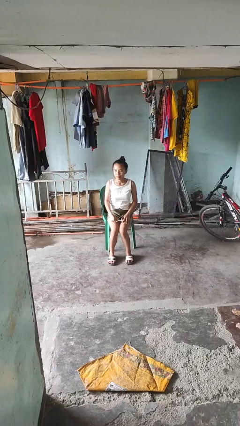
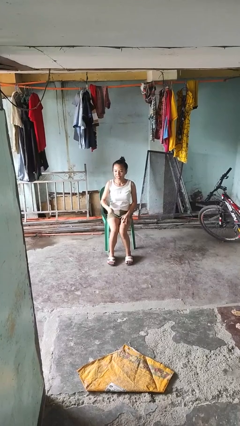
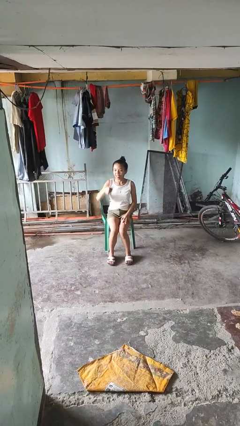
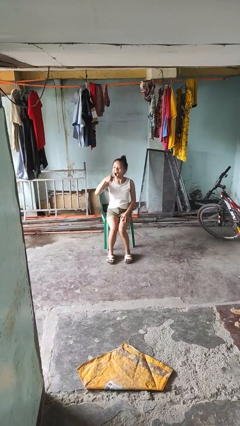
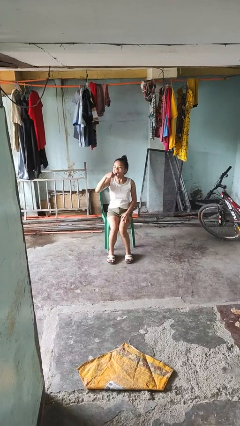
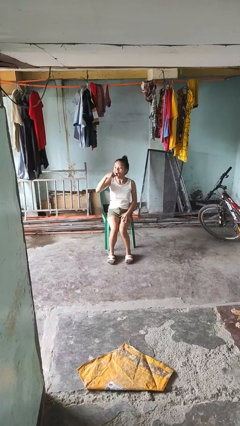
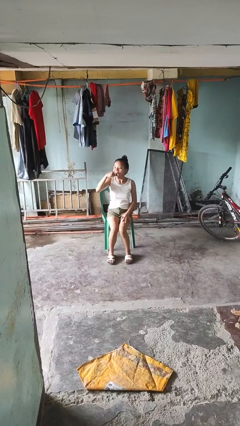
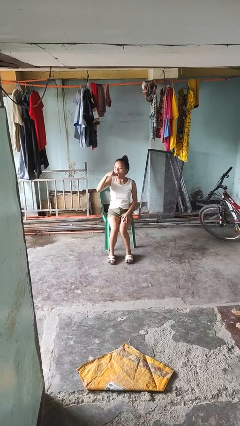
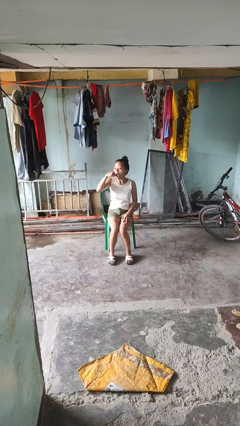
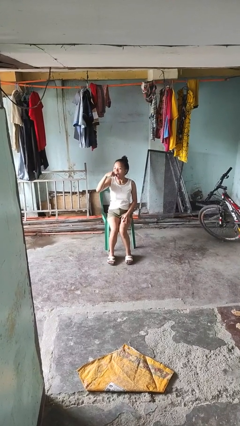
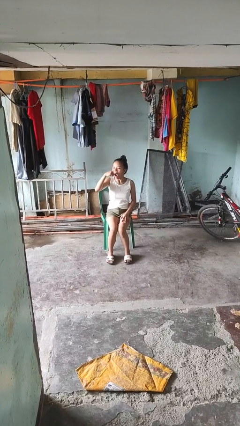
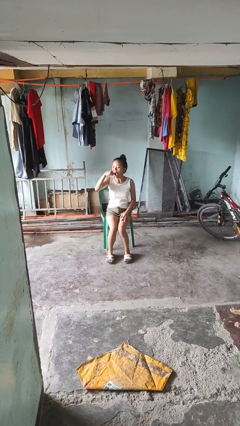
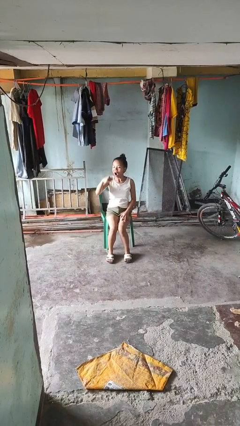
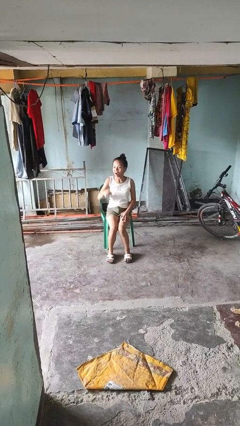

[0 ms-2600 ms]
person brushes teeth

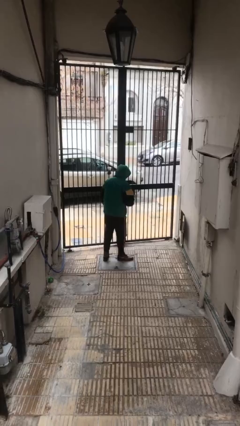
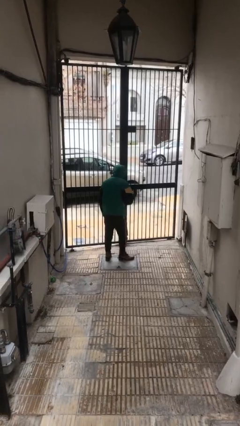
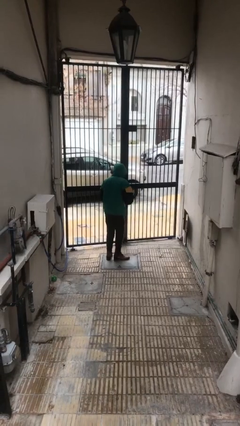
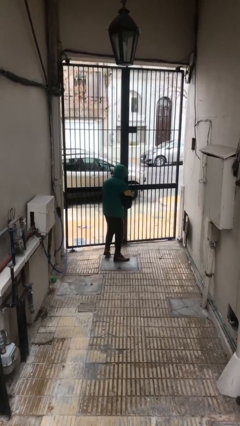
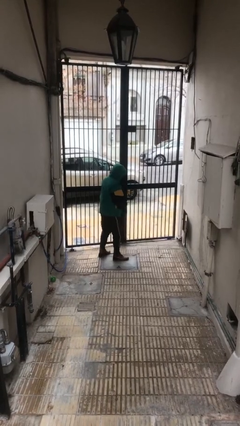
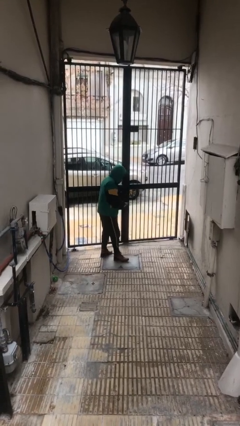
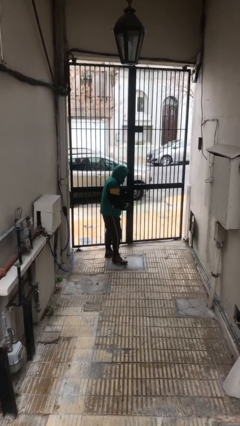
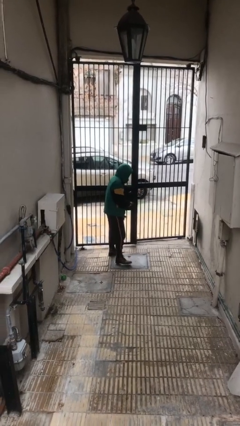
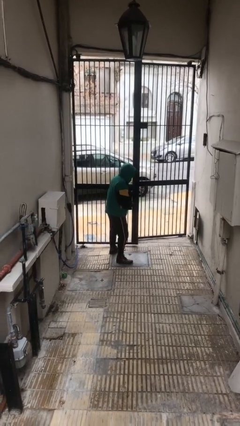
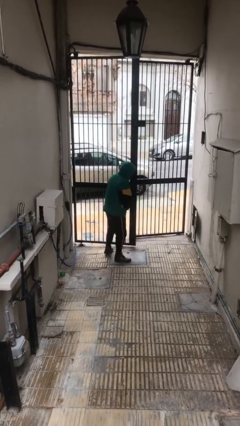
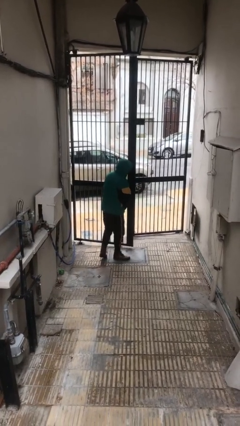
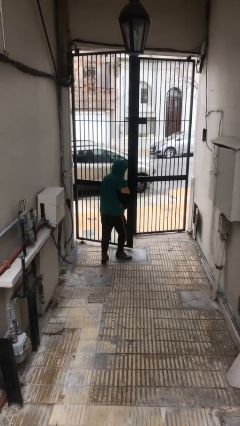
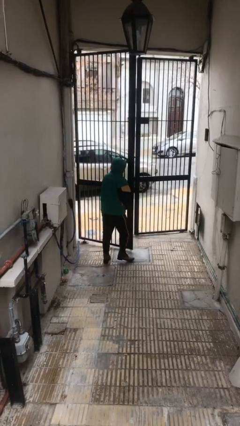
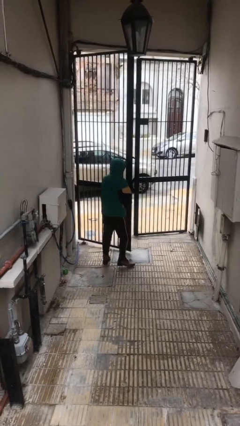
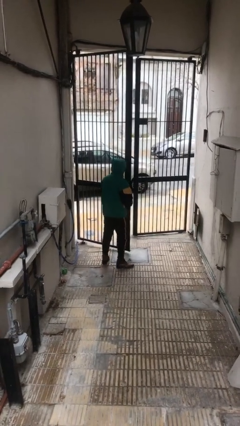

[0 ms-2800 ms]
person opens gate

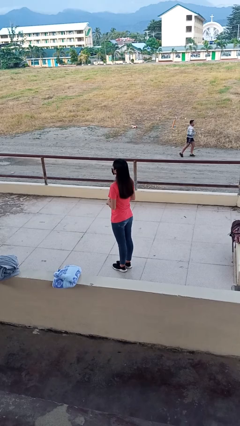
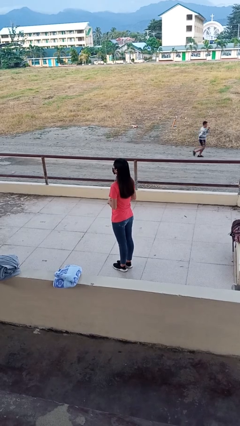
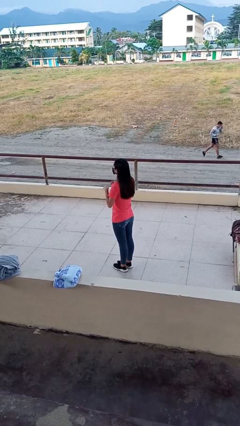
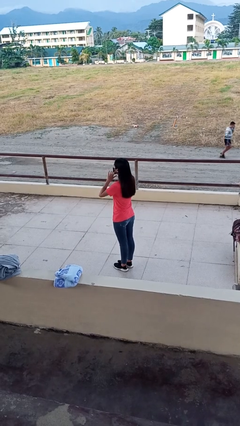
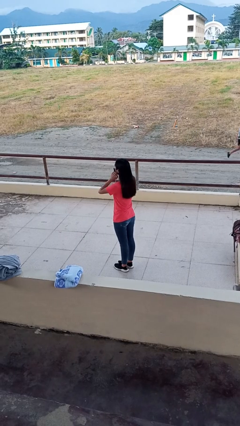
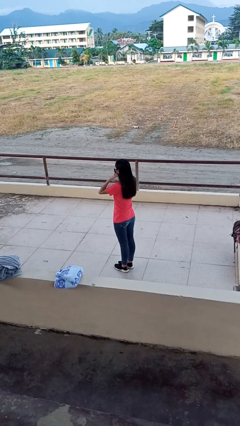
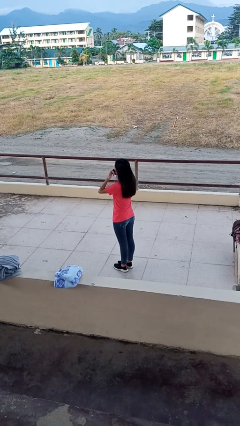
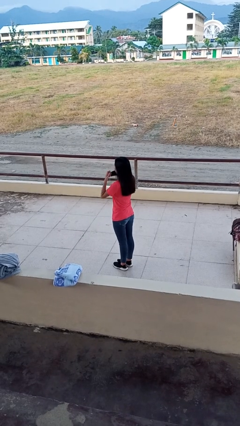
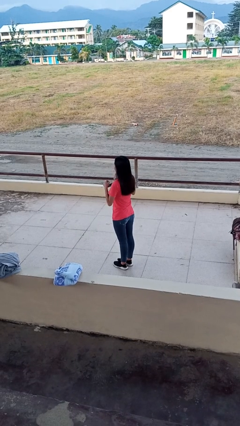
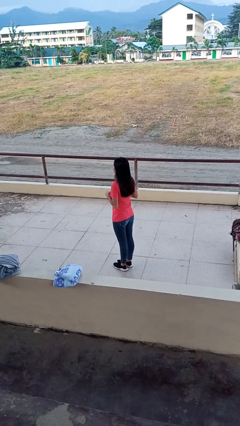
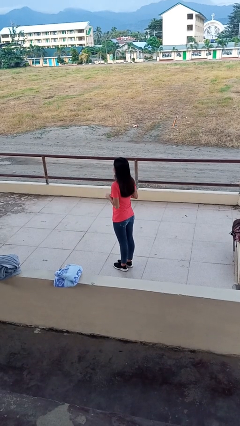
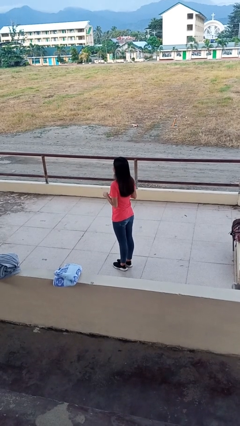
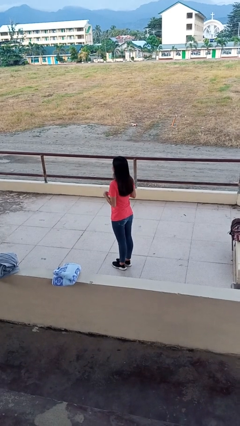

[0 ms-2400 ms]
person takes off facemask

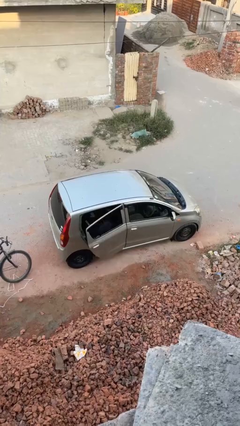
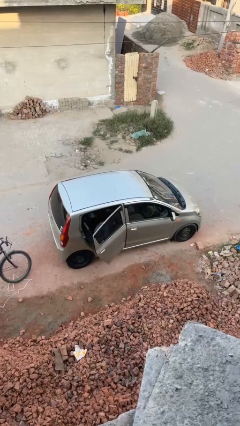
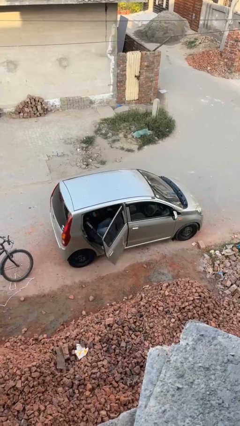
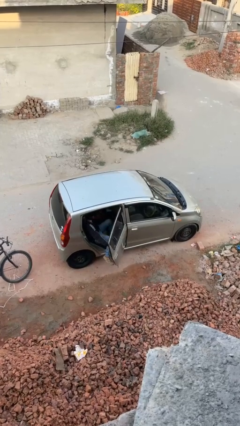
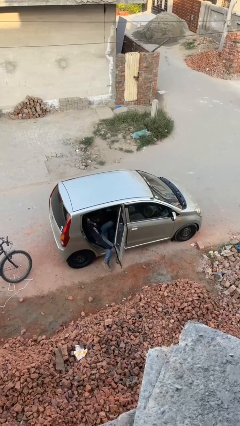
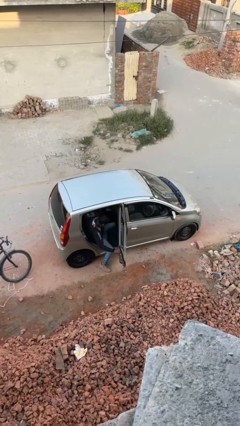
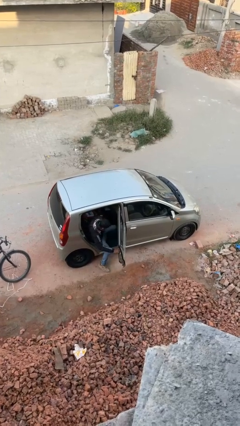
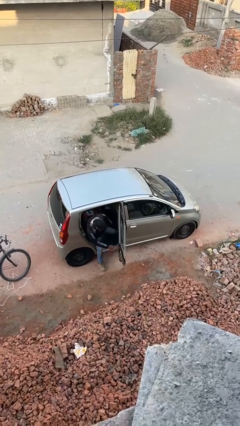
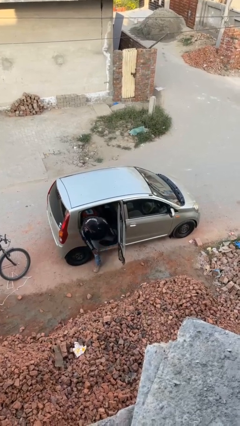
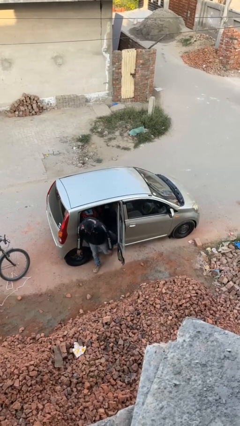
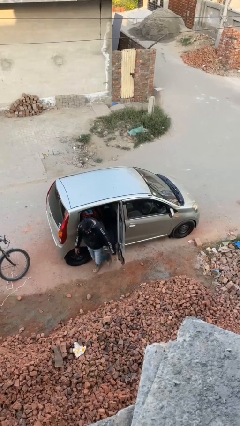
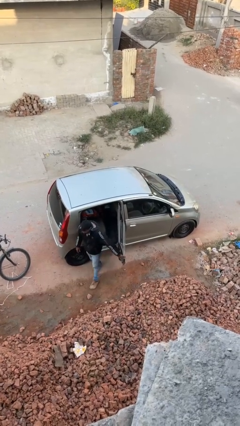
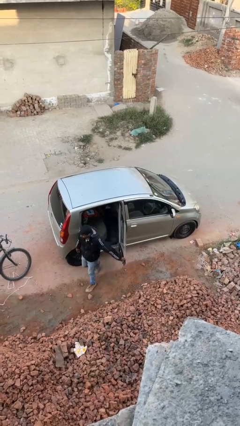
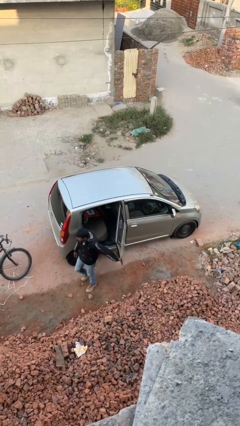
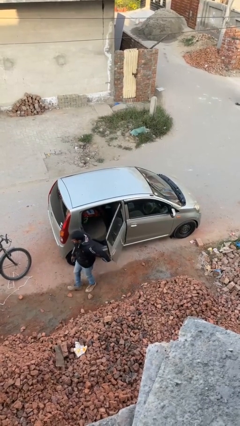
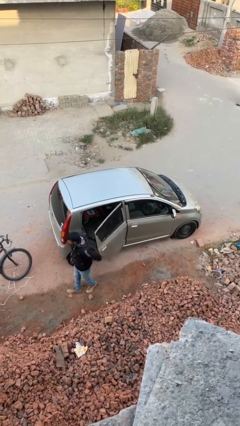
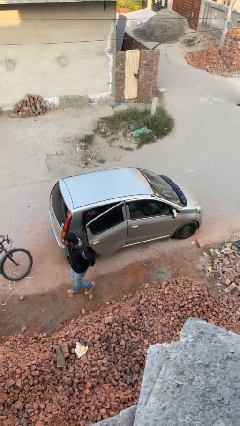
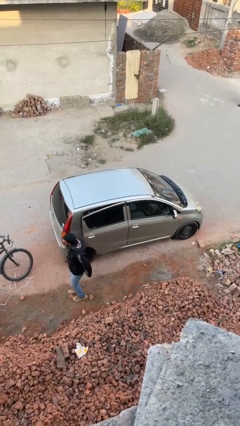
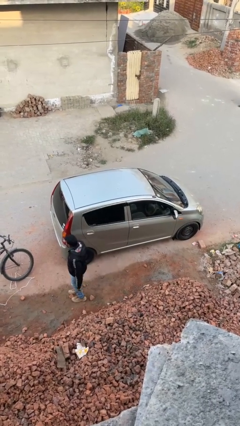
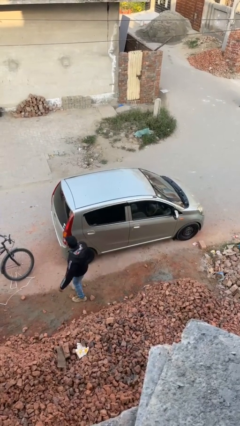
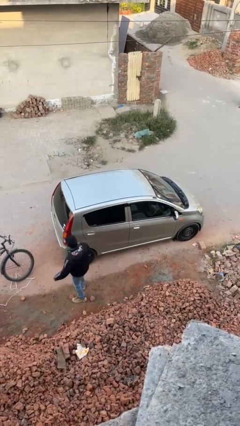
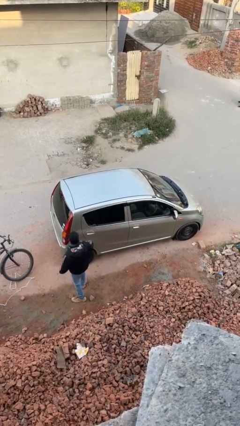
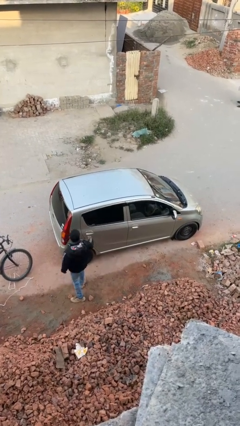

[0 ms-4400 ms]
car drops off person

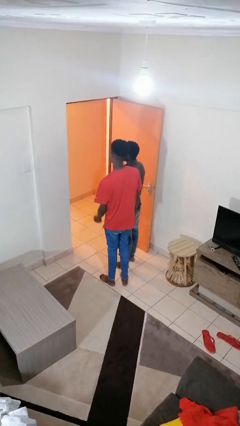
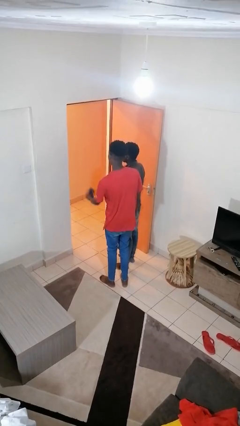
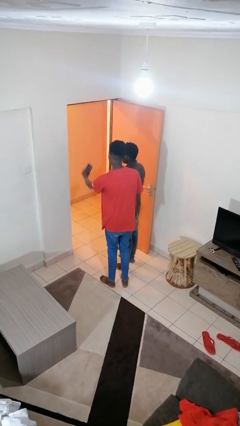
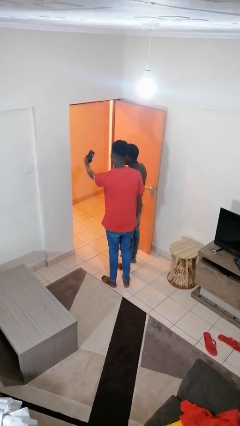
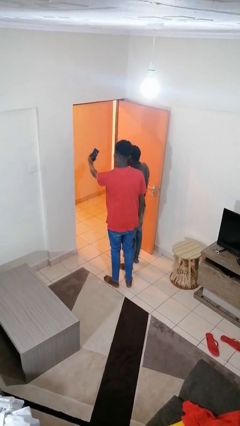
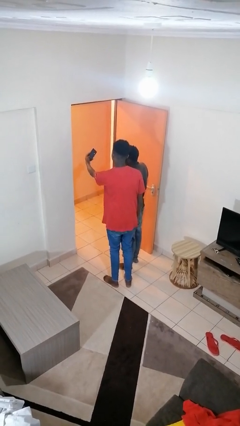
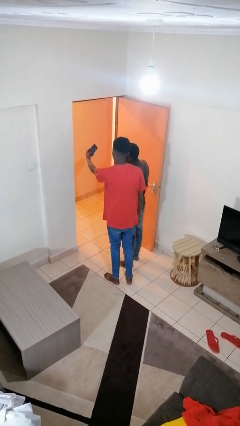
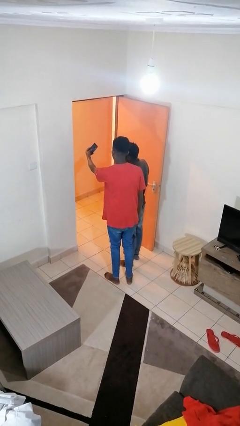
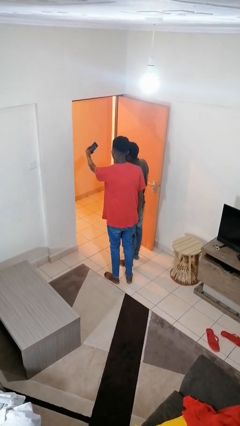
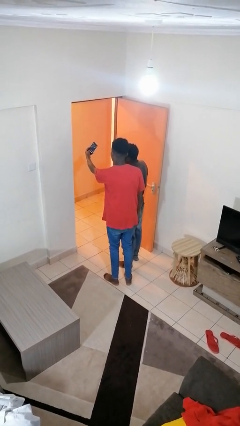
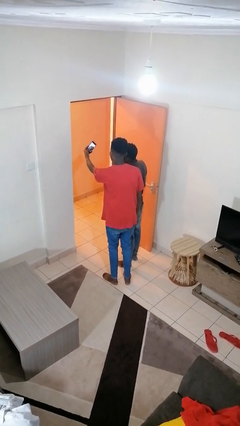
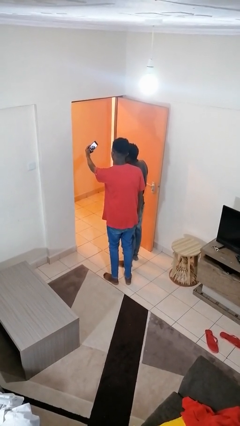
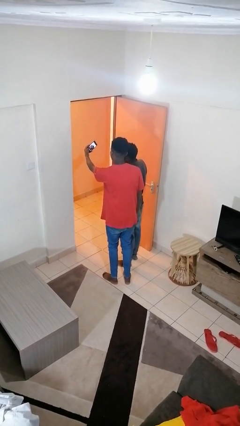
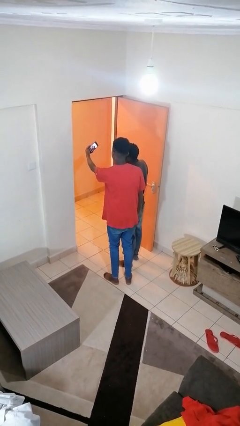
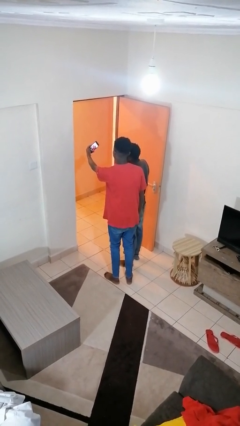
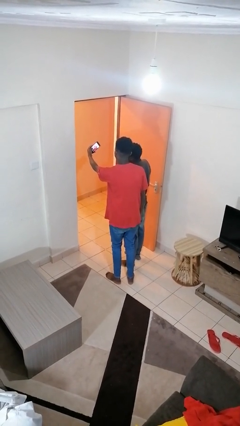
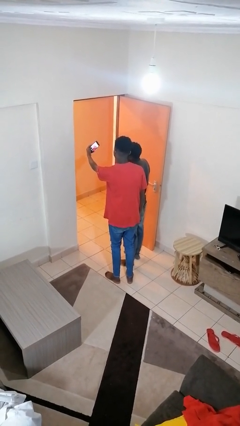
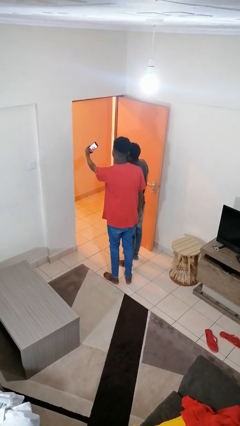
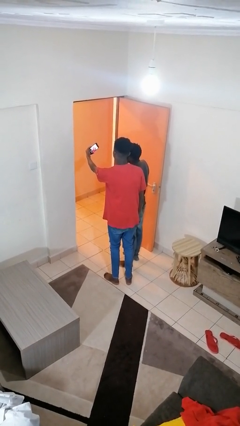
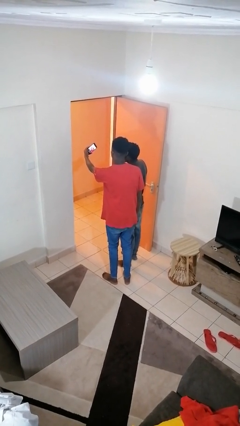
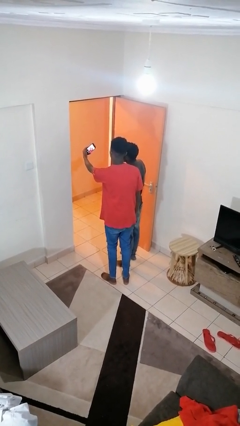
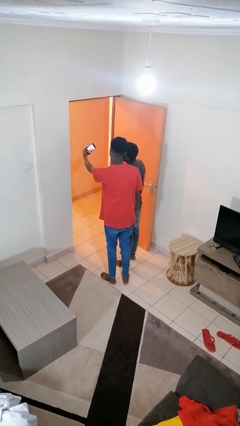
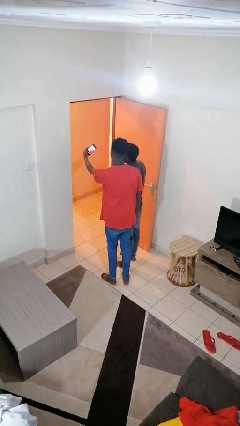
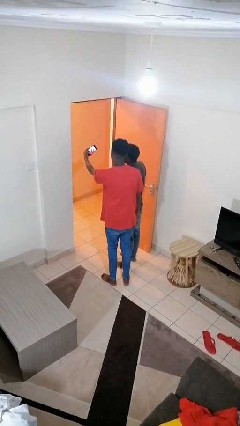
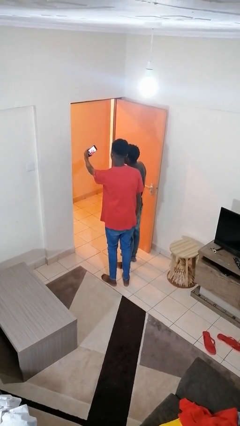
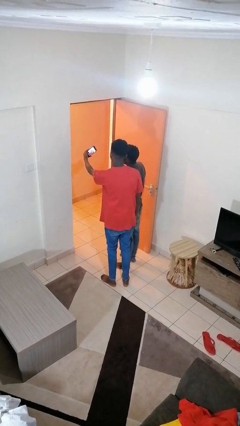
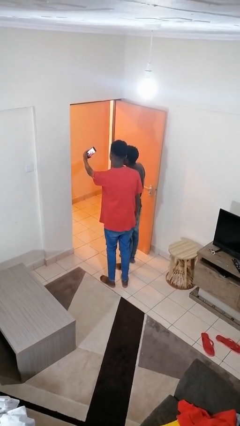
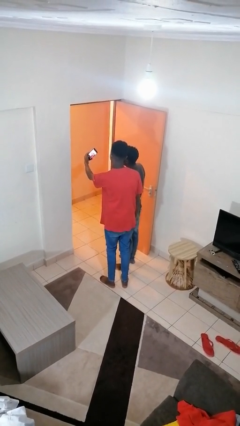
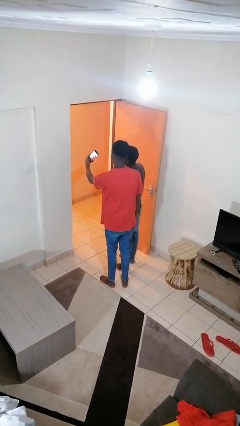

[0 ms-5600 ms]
person takes selfie with person

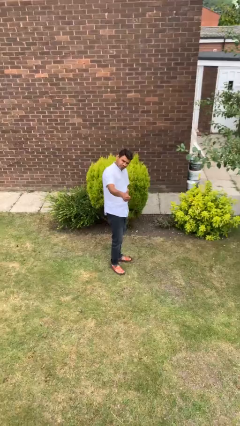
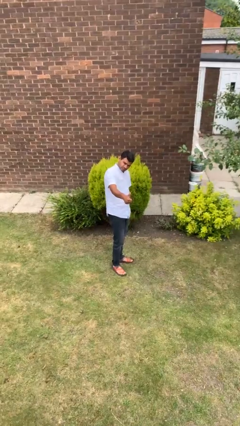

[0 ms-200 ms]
person gestures thumbs up
